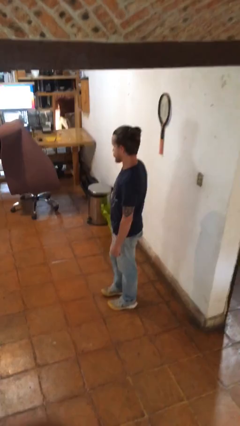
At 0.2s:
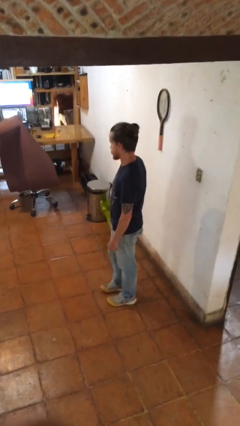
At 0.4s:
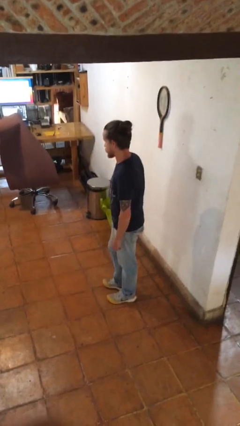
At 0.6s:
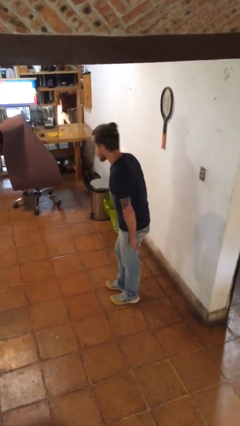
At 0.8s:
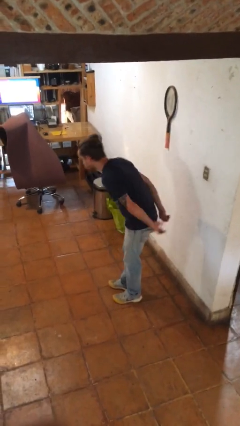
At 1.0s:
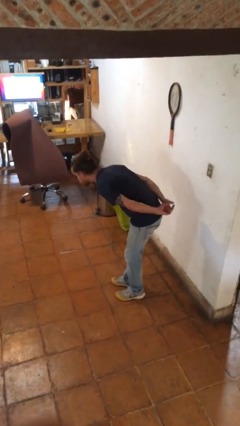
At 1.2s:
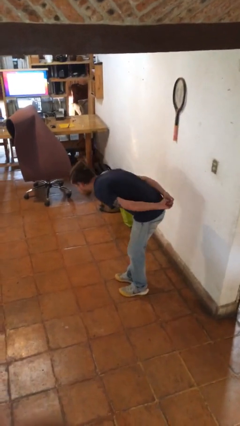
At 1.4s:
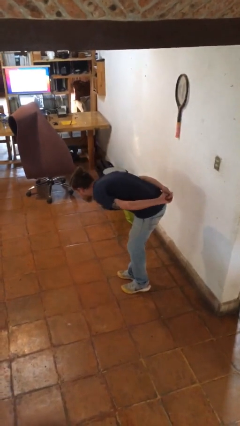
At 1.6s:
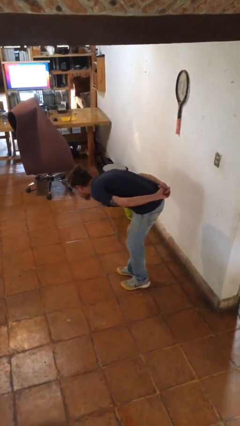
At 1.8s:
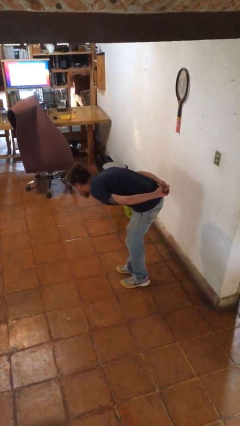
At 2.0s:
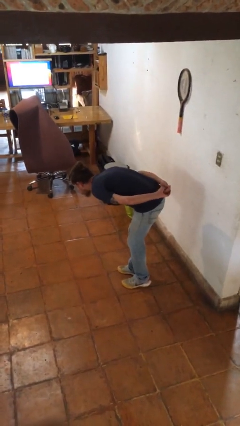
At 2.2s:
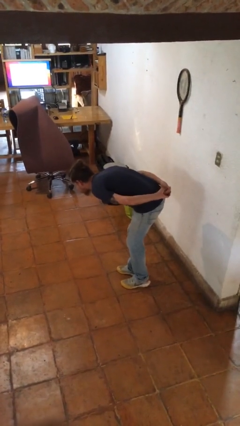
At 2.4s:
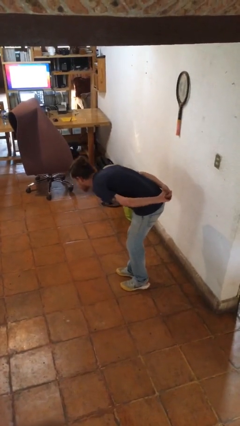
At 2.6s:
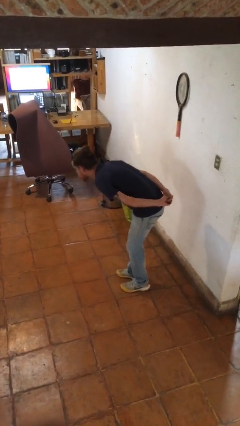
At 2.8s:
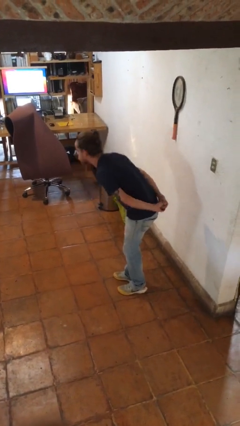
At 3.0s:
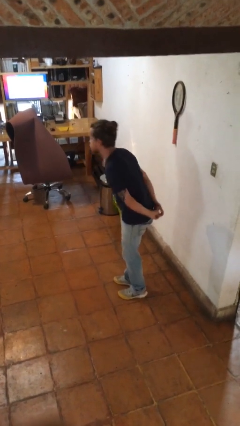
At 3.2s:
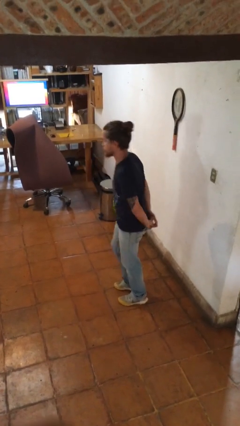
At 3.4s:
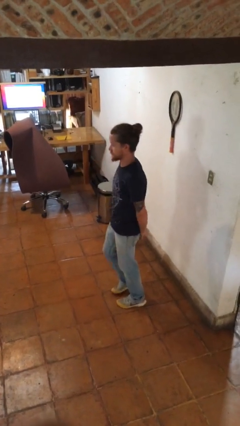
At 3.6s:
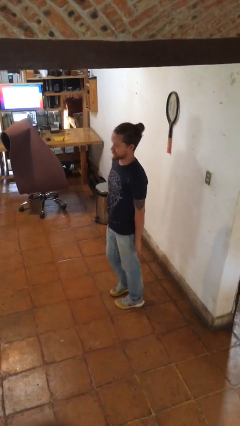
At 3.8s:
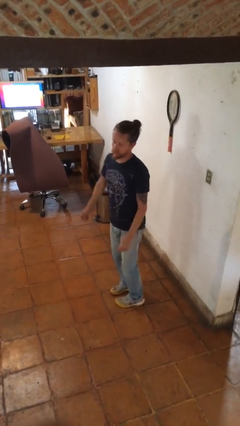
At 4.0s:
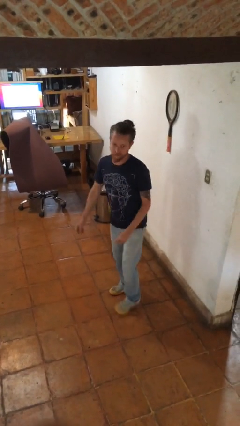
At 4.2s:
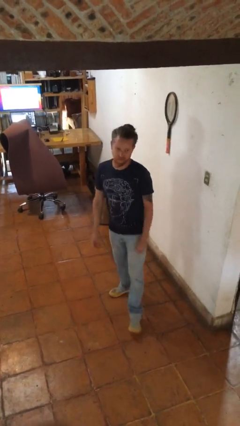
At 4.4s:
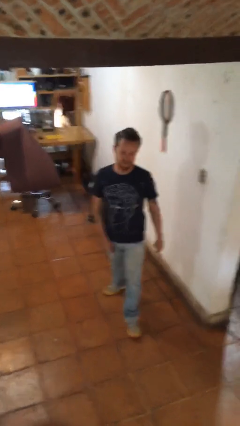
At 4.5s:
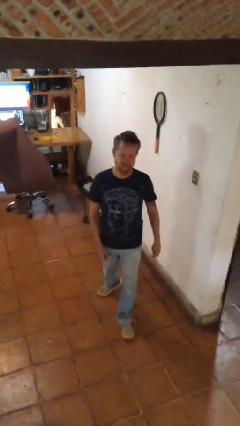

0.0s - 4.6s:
person bows

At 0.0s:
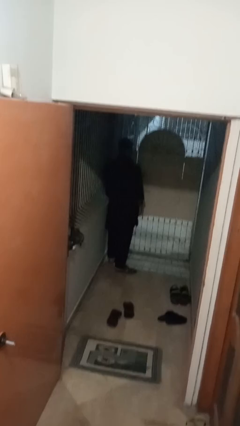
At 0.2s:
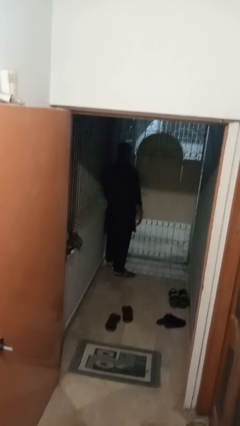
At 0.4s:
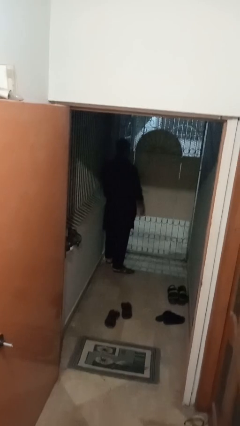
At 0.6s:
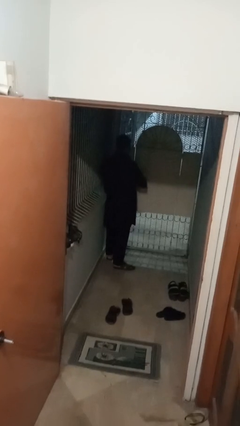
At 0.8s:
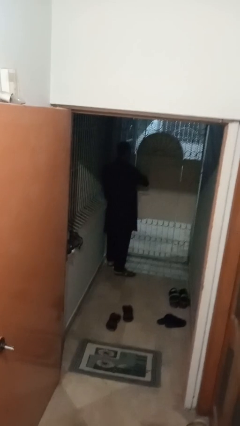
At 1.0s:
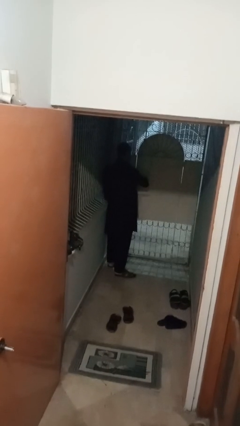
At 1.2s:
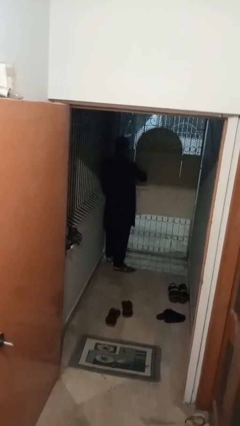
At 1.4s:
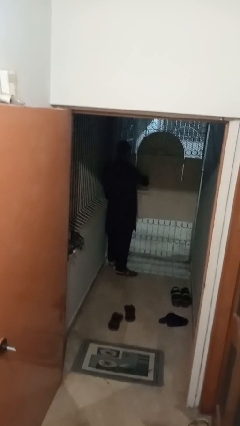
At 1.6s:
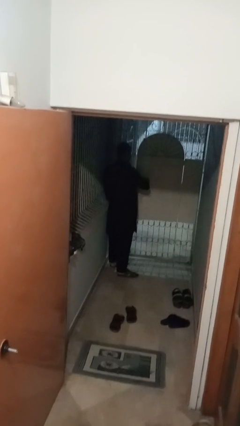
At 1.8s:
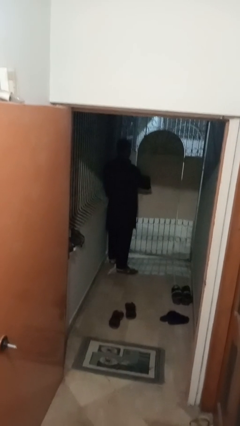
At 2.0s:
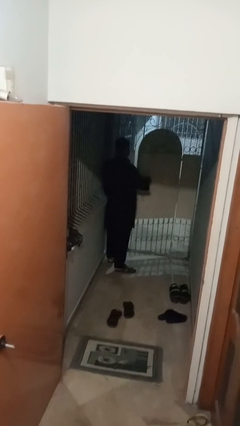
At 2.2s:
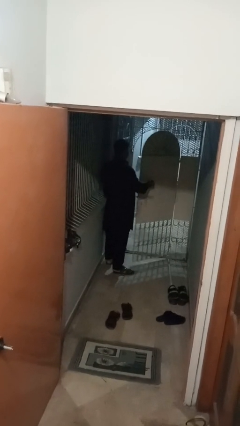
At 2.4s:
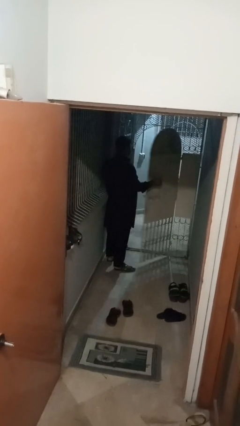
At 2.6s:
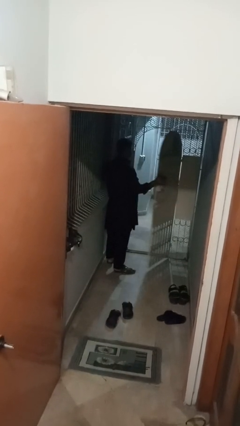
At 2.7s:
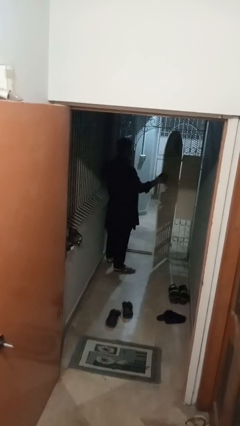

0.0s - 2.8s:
person opens gate

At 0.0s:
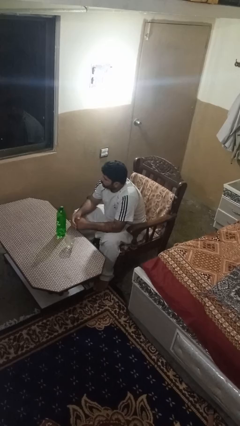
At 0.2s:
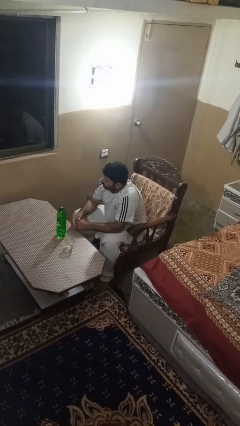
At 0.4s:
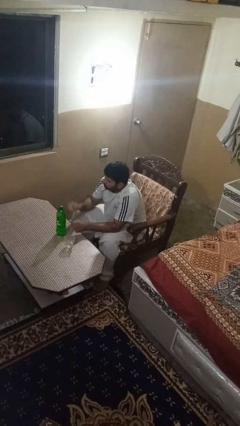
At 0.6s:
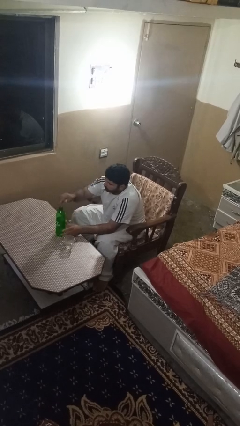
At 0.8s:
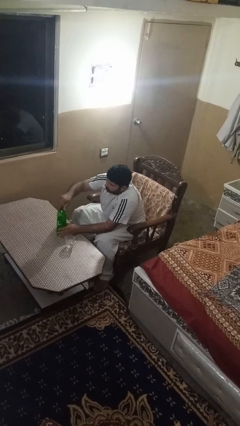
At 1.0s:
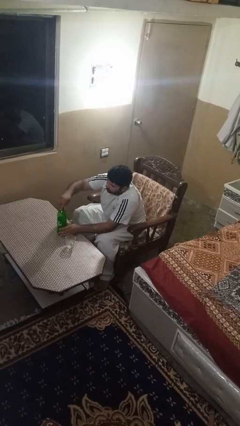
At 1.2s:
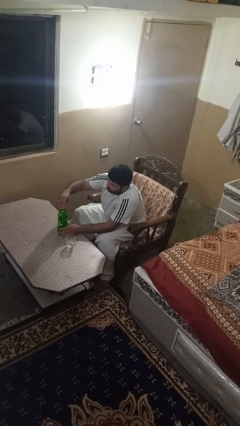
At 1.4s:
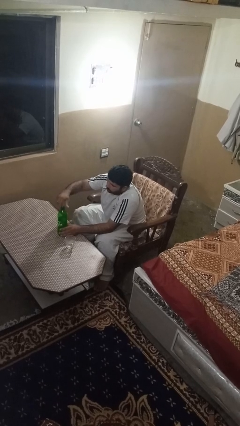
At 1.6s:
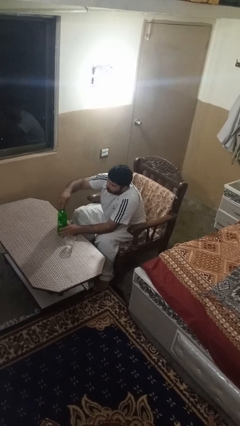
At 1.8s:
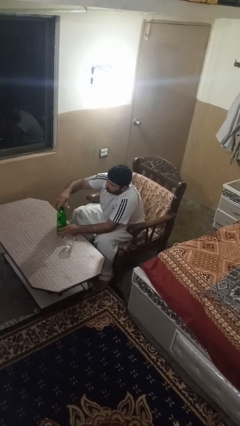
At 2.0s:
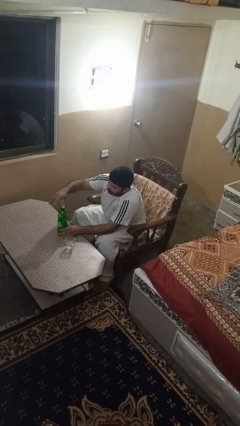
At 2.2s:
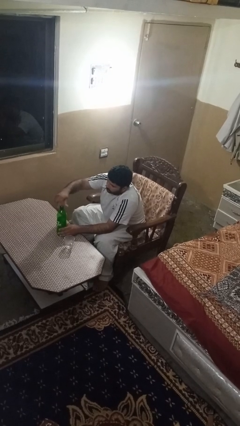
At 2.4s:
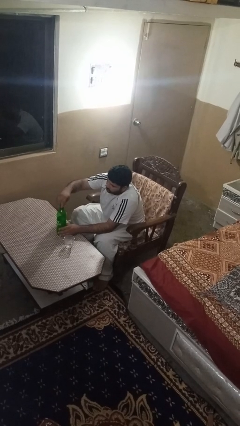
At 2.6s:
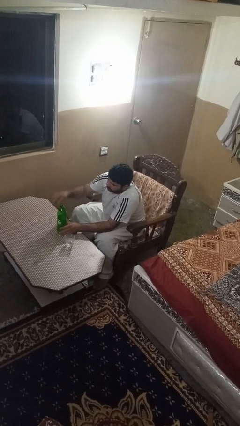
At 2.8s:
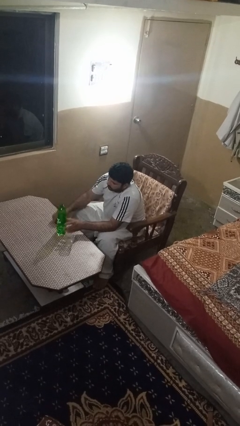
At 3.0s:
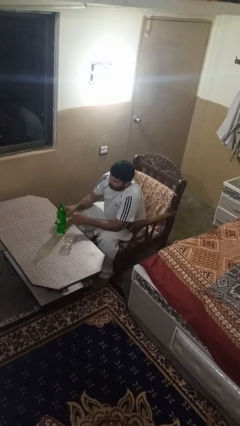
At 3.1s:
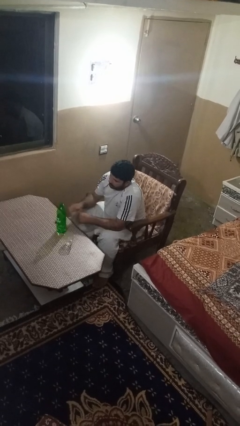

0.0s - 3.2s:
person unscrews lid from bottle

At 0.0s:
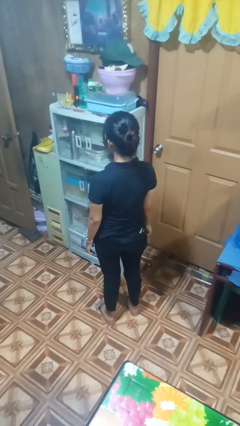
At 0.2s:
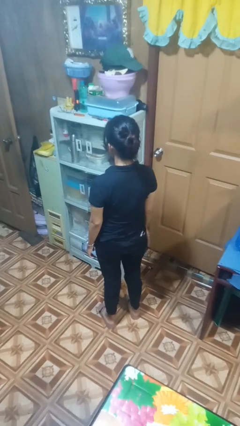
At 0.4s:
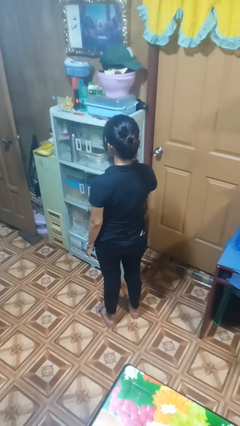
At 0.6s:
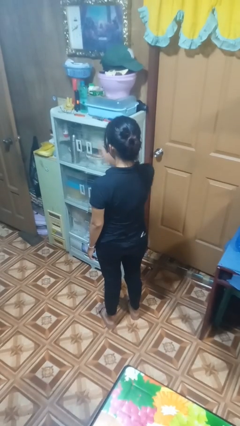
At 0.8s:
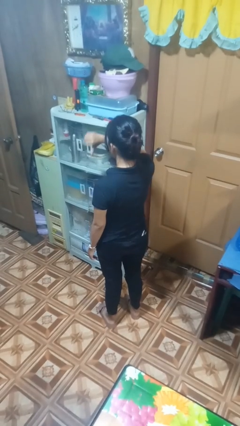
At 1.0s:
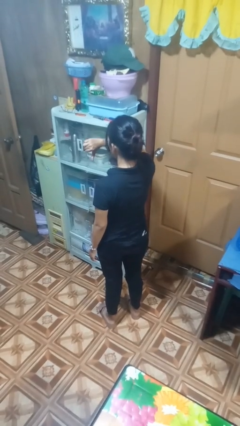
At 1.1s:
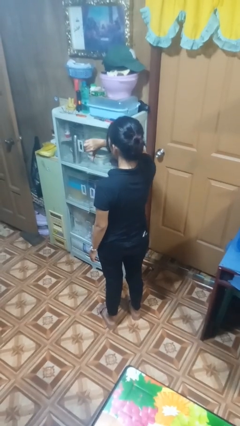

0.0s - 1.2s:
person gestures thumbs down

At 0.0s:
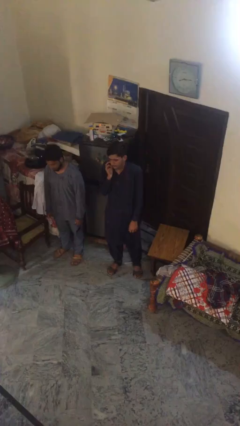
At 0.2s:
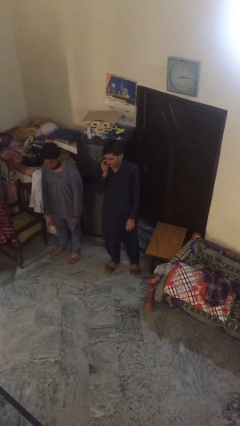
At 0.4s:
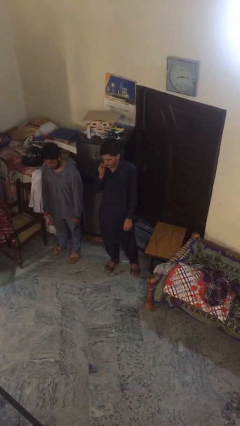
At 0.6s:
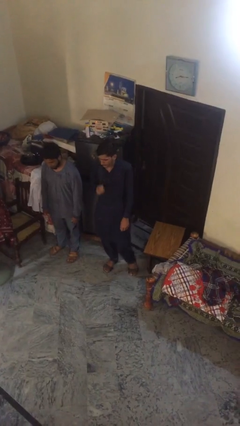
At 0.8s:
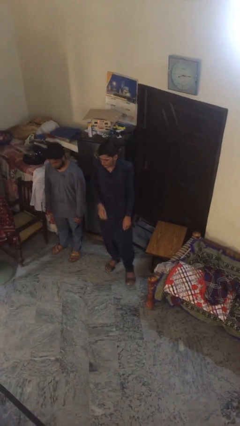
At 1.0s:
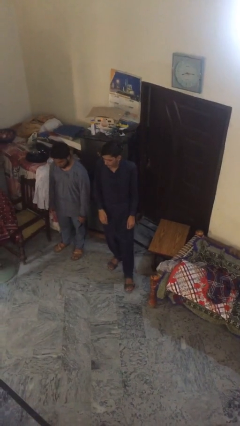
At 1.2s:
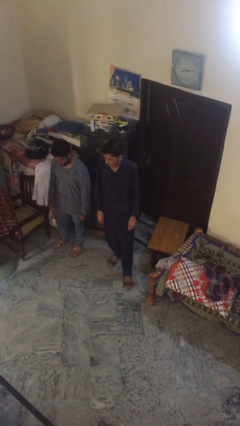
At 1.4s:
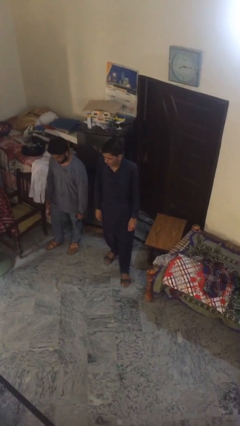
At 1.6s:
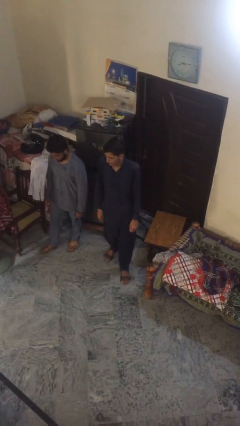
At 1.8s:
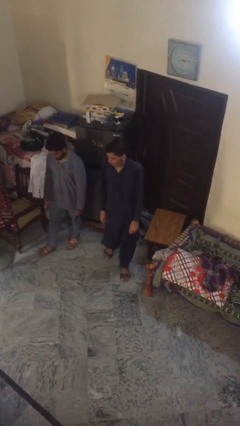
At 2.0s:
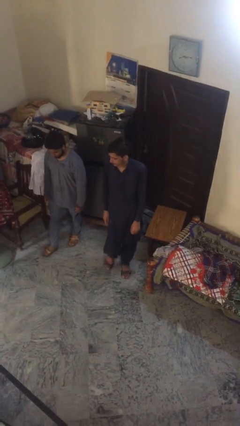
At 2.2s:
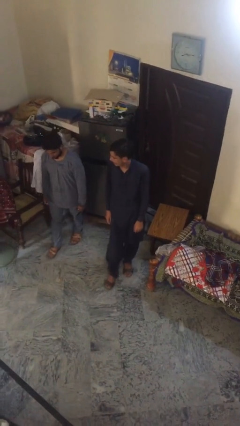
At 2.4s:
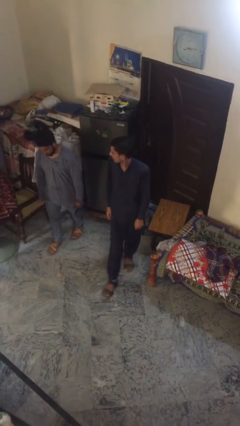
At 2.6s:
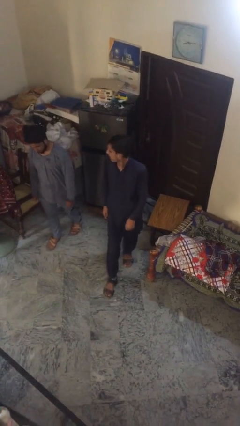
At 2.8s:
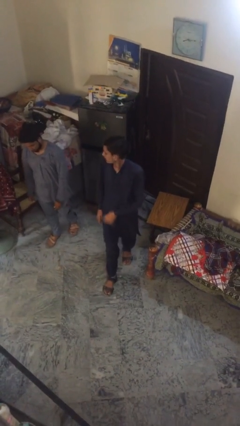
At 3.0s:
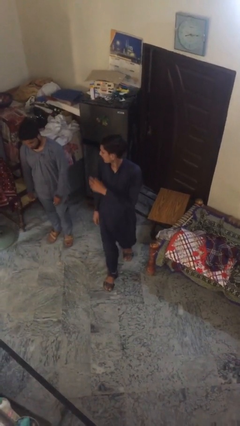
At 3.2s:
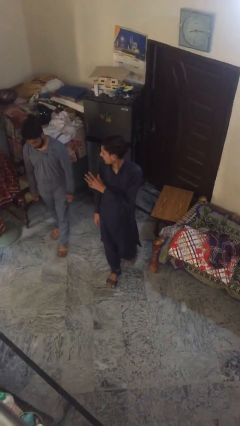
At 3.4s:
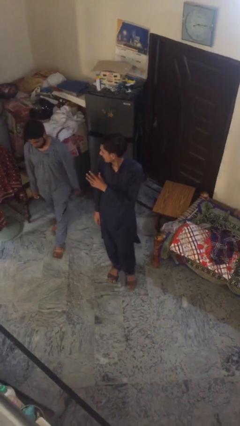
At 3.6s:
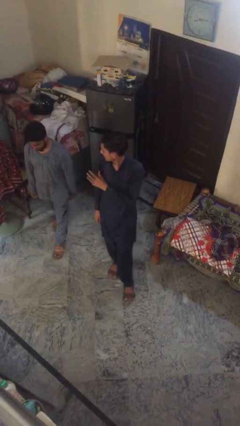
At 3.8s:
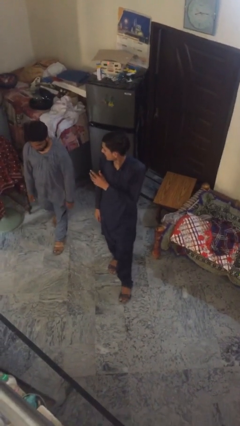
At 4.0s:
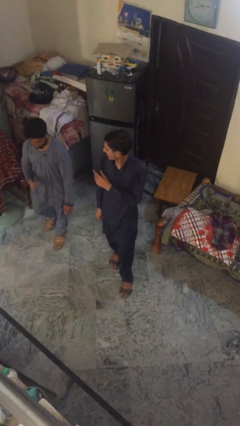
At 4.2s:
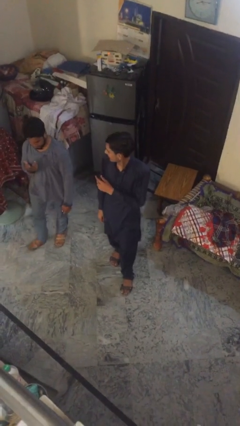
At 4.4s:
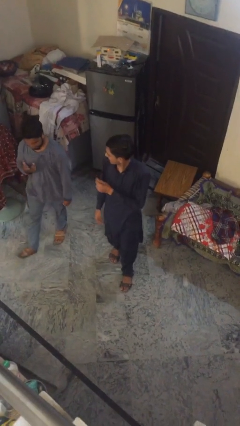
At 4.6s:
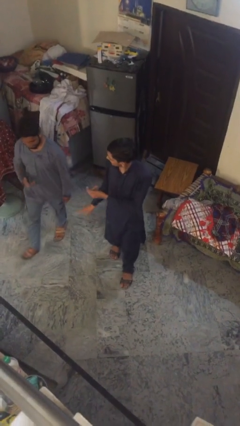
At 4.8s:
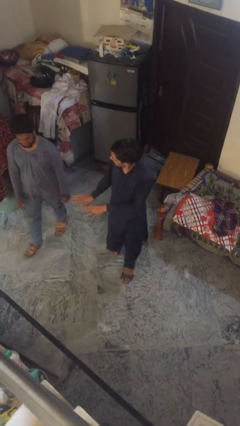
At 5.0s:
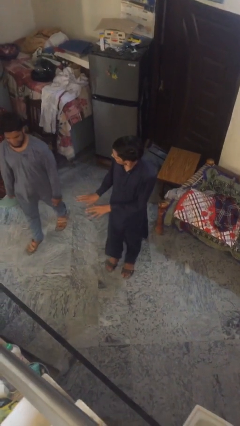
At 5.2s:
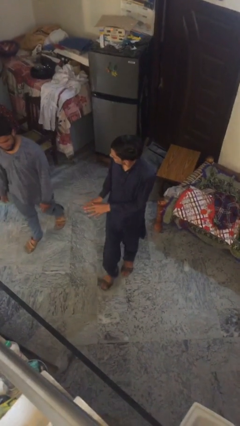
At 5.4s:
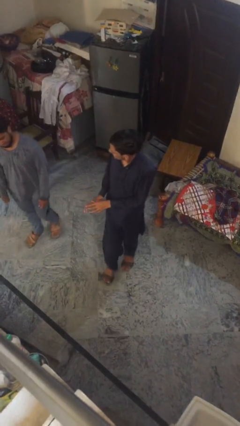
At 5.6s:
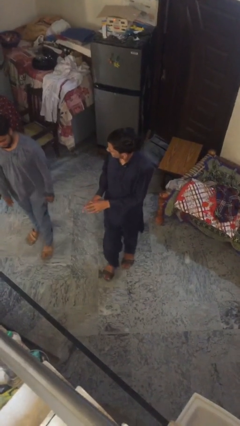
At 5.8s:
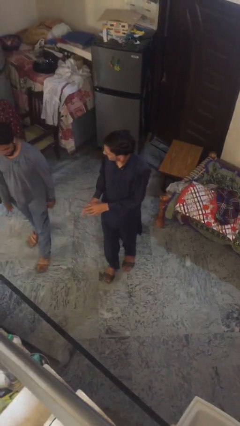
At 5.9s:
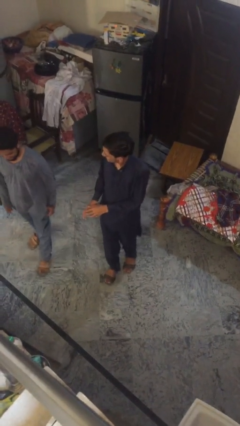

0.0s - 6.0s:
person talks to person
